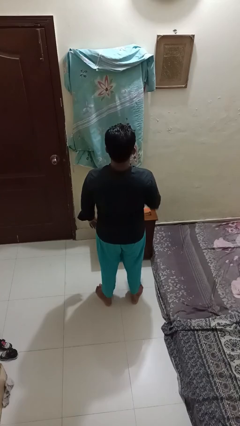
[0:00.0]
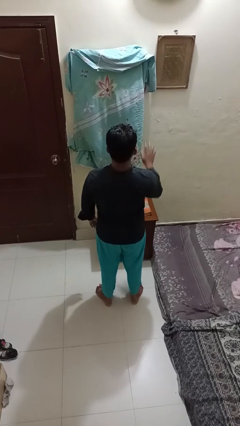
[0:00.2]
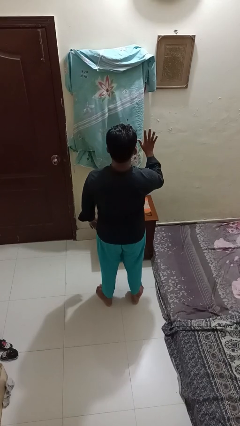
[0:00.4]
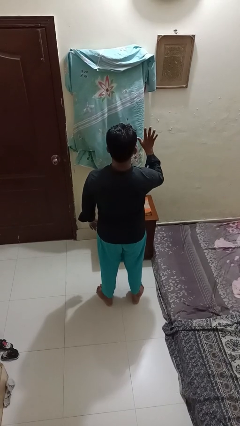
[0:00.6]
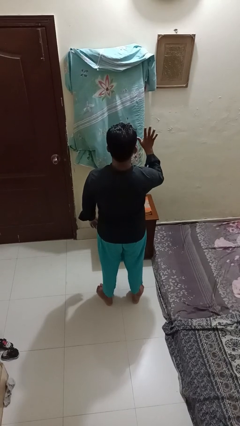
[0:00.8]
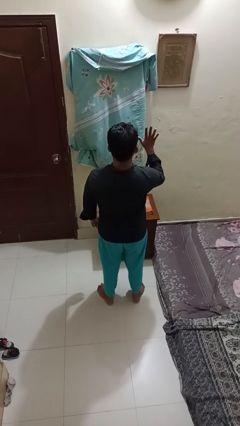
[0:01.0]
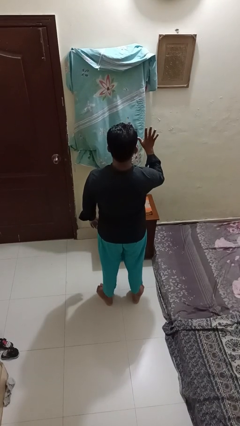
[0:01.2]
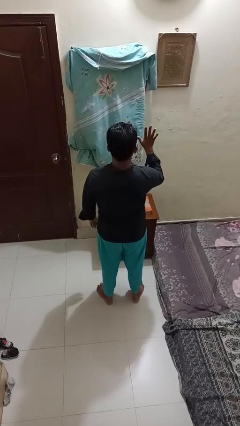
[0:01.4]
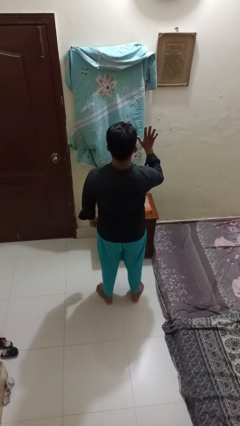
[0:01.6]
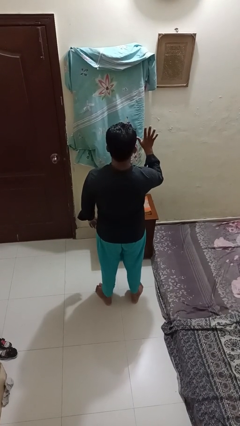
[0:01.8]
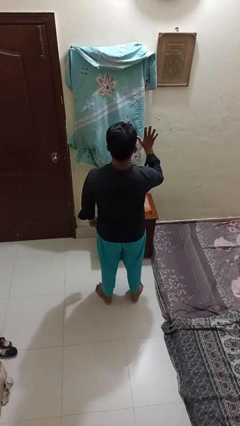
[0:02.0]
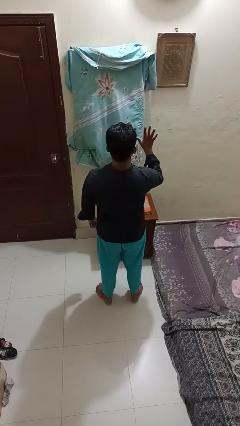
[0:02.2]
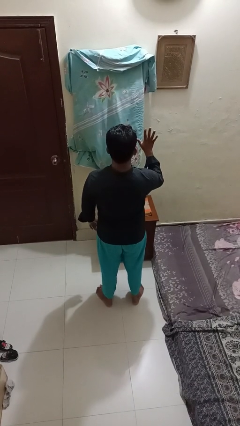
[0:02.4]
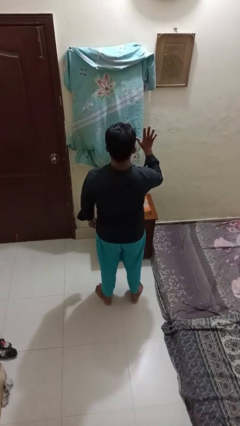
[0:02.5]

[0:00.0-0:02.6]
person gestures number five

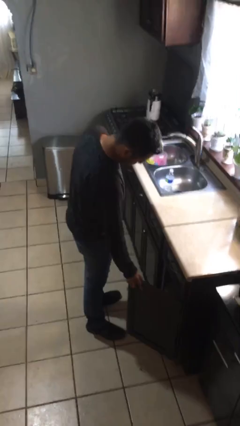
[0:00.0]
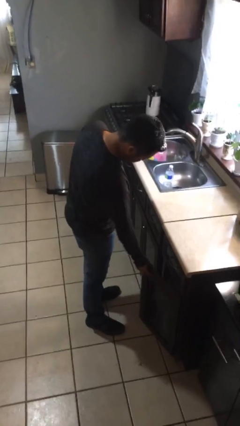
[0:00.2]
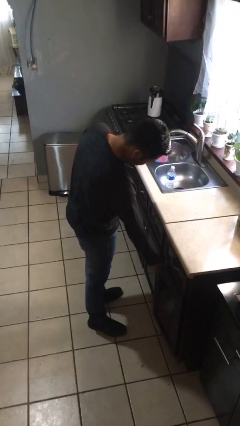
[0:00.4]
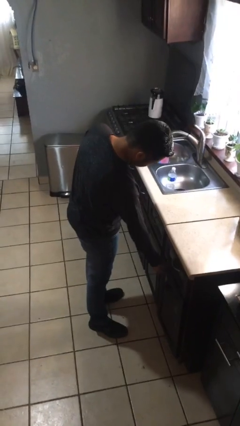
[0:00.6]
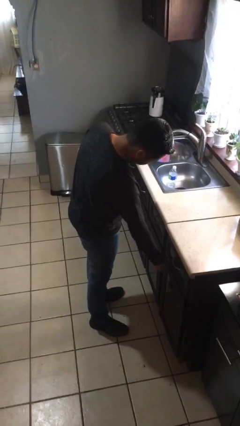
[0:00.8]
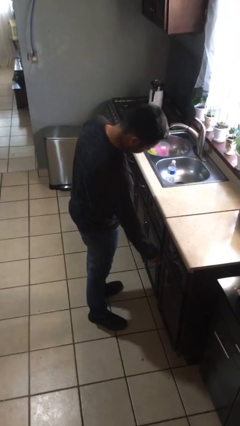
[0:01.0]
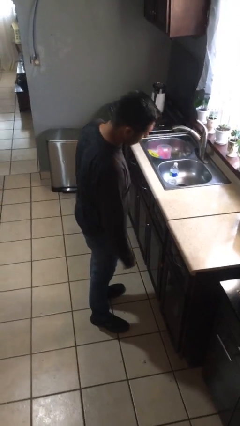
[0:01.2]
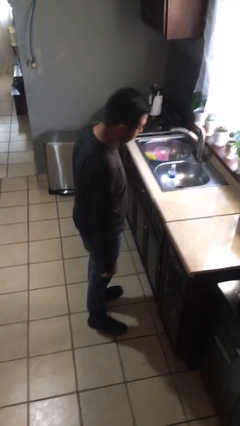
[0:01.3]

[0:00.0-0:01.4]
person closes cabinet

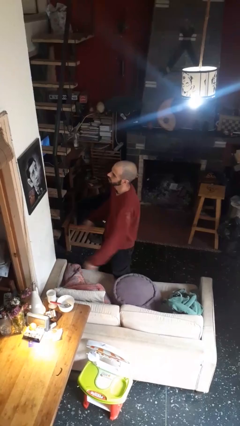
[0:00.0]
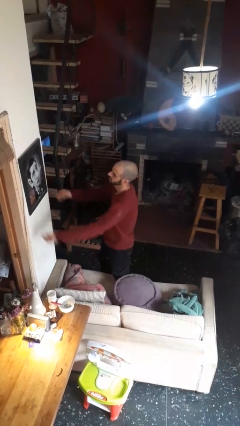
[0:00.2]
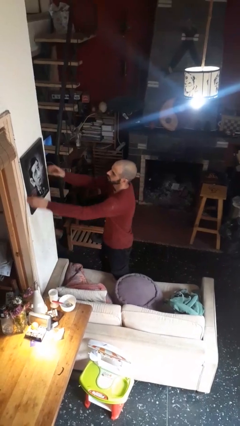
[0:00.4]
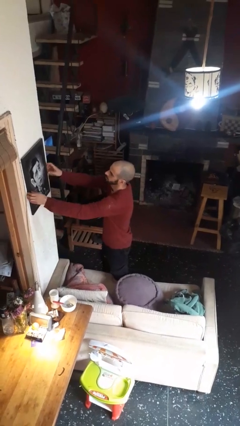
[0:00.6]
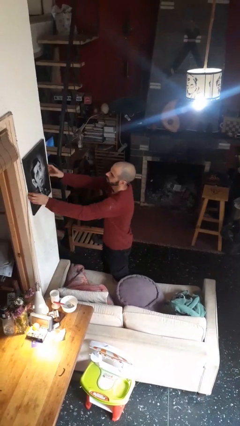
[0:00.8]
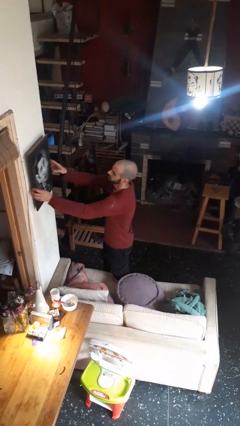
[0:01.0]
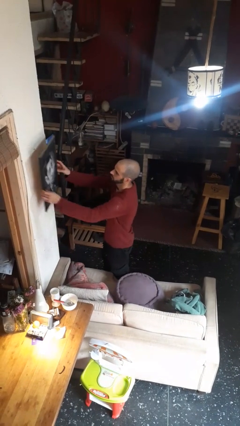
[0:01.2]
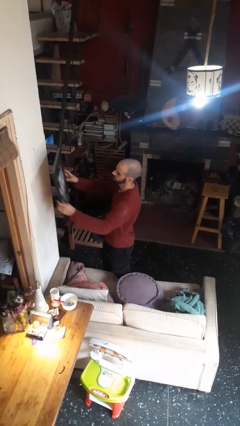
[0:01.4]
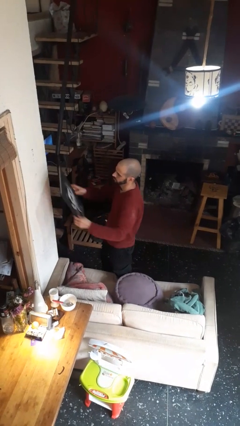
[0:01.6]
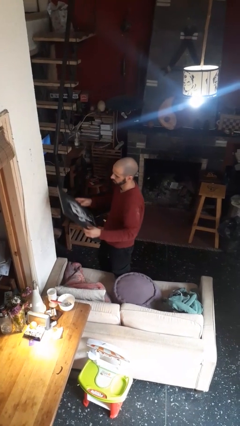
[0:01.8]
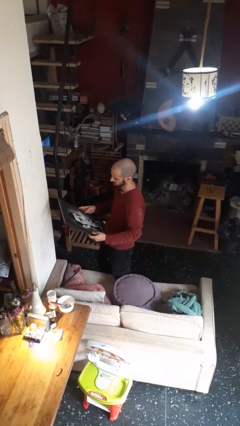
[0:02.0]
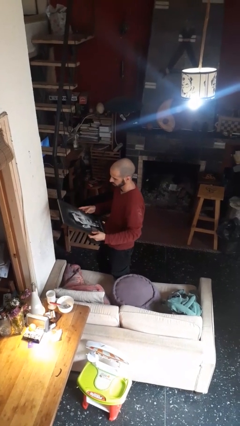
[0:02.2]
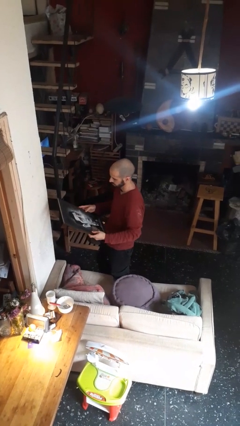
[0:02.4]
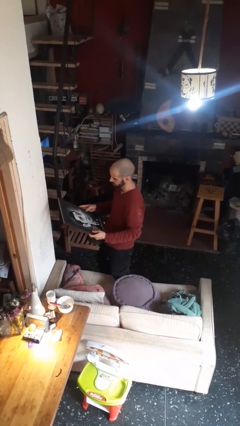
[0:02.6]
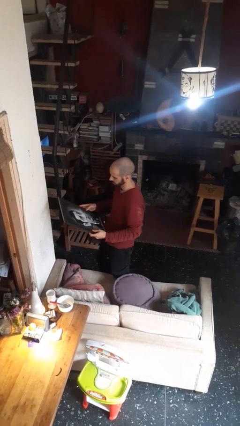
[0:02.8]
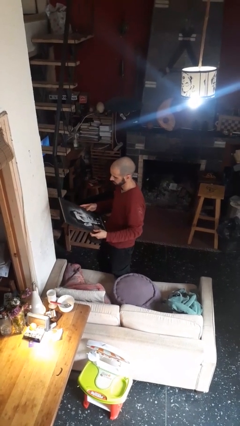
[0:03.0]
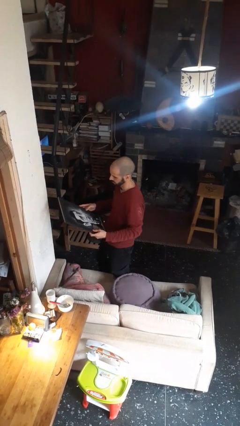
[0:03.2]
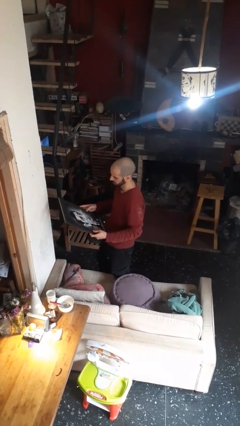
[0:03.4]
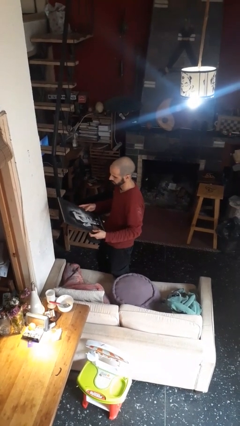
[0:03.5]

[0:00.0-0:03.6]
person takes down picture frame

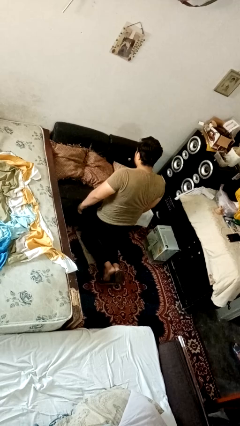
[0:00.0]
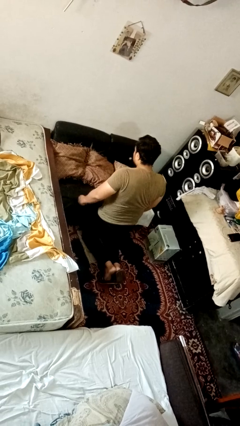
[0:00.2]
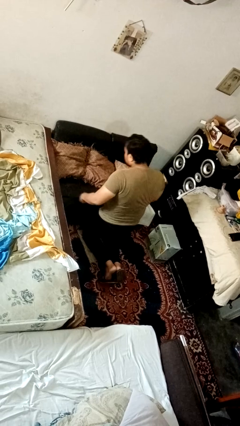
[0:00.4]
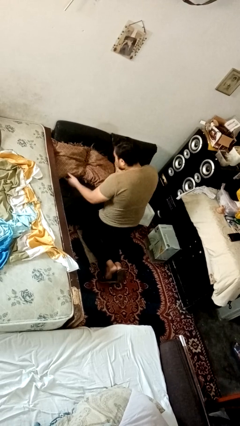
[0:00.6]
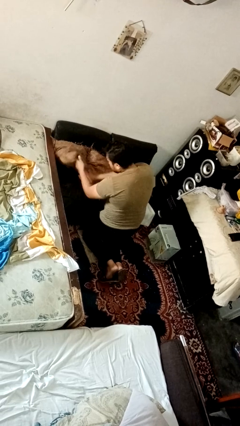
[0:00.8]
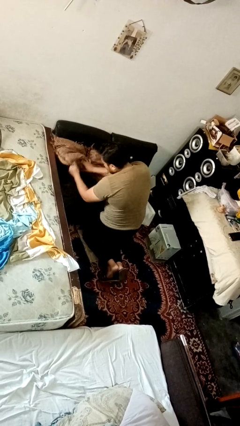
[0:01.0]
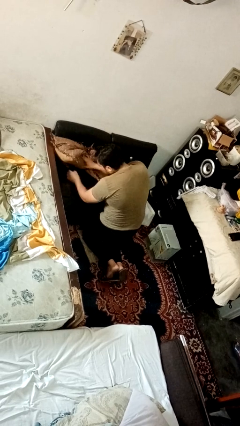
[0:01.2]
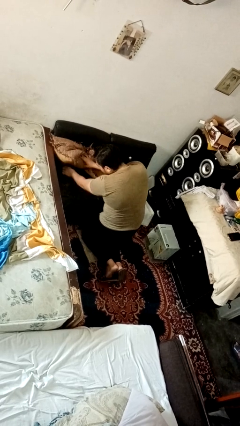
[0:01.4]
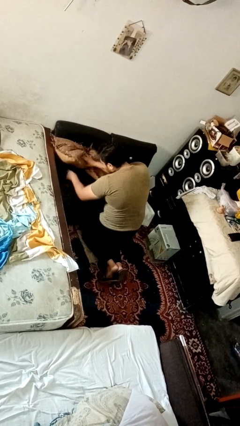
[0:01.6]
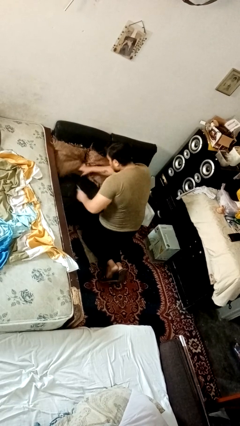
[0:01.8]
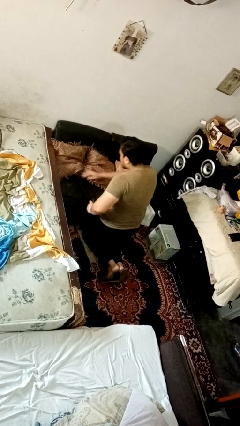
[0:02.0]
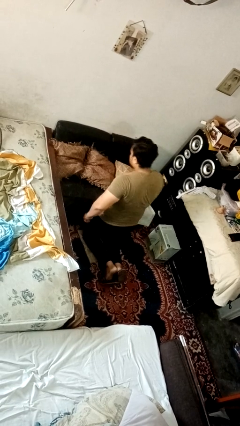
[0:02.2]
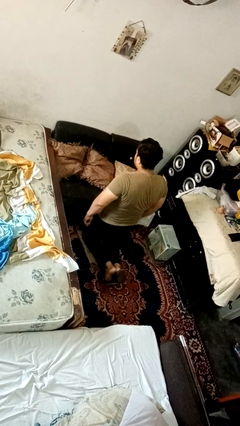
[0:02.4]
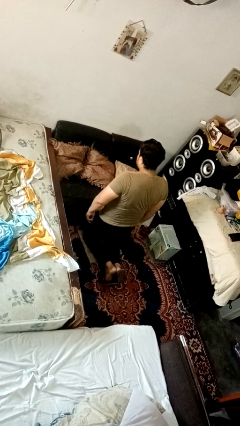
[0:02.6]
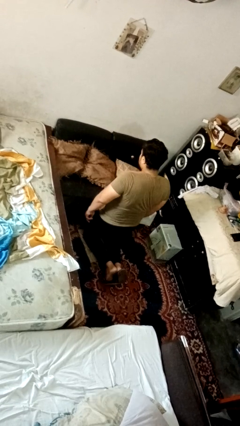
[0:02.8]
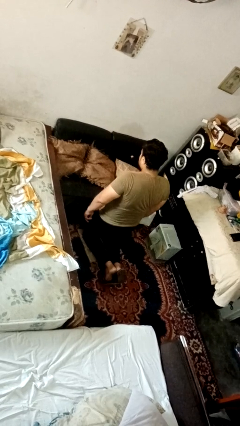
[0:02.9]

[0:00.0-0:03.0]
person searches in couch

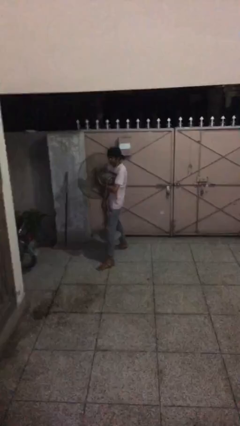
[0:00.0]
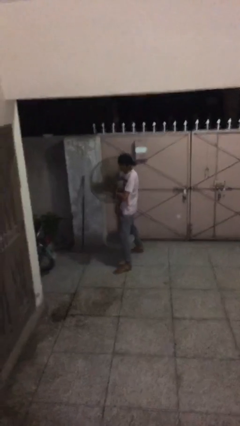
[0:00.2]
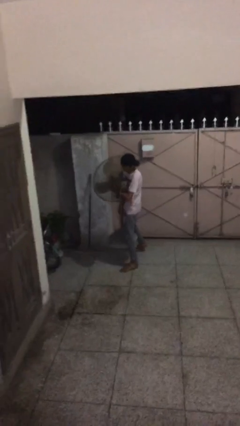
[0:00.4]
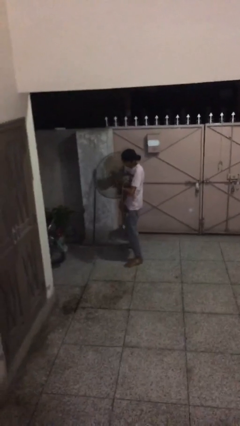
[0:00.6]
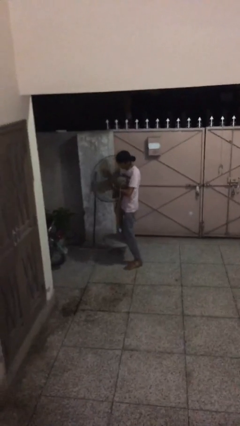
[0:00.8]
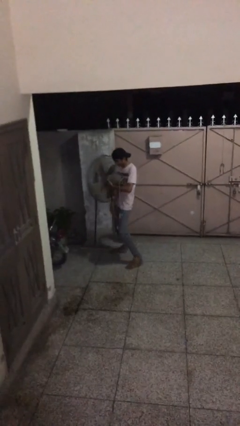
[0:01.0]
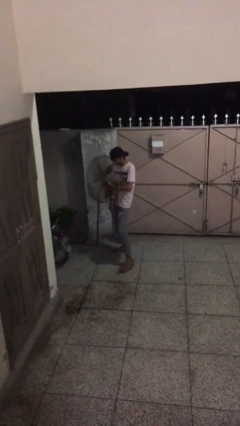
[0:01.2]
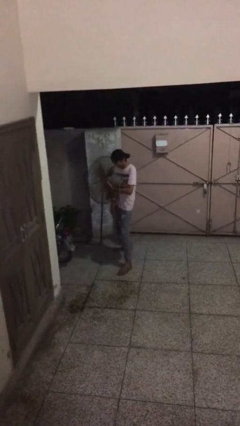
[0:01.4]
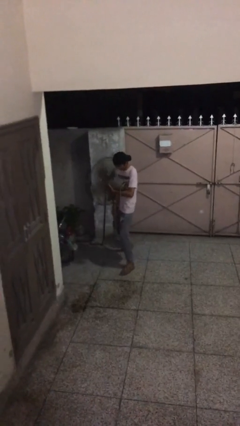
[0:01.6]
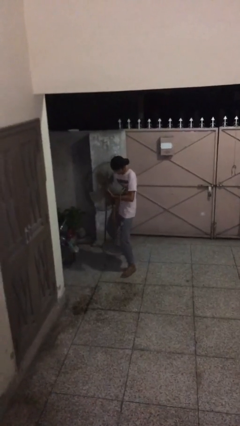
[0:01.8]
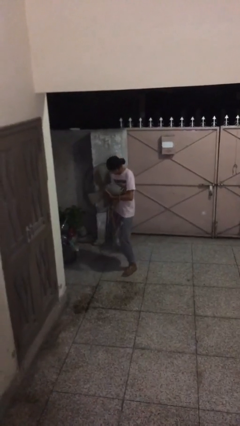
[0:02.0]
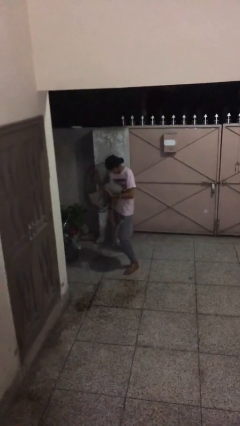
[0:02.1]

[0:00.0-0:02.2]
person carries heavy object

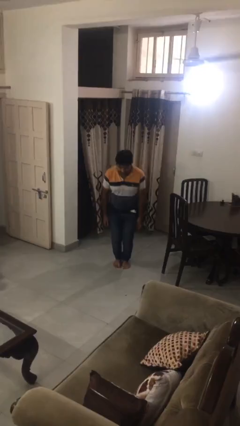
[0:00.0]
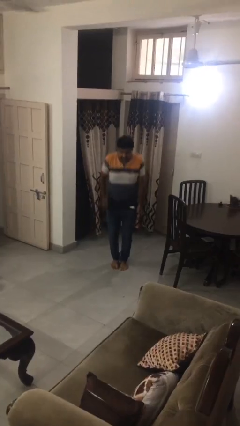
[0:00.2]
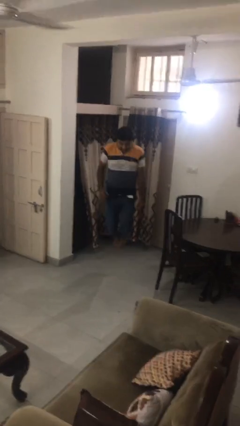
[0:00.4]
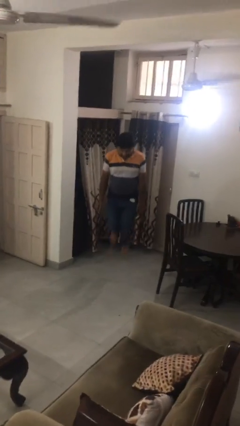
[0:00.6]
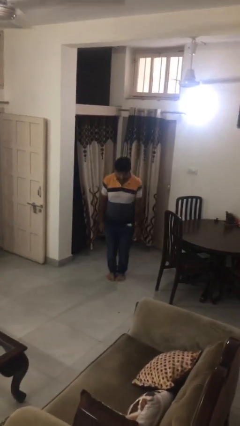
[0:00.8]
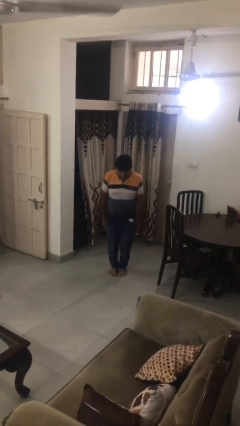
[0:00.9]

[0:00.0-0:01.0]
person jumps

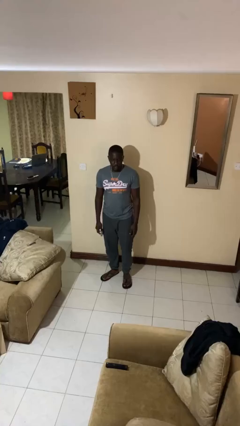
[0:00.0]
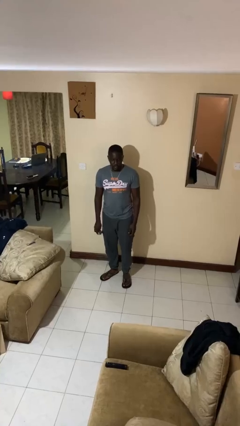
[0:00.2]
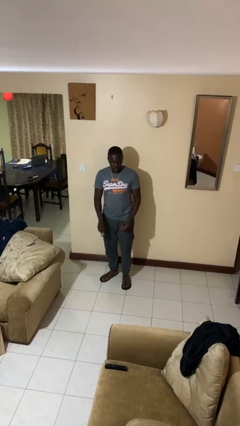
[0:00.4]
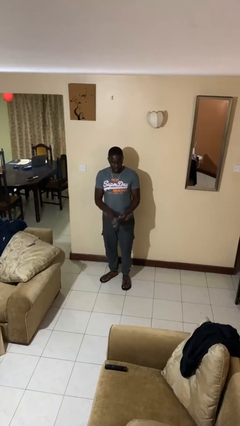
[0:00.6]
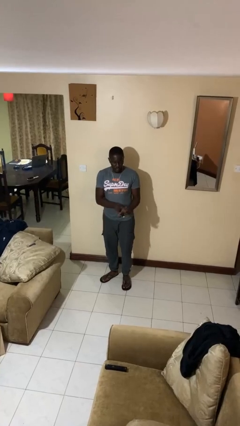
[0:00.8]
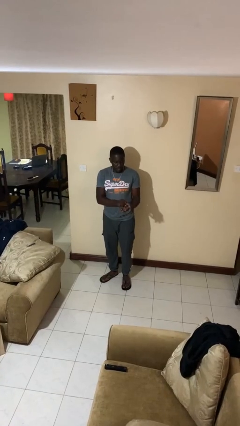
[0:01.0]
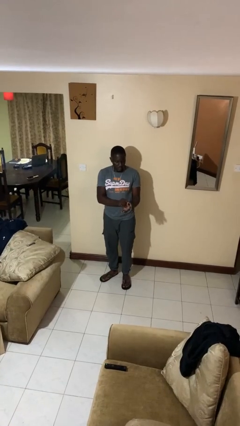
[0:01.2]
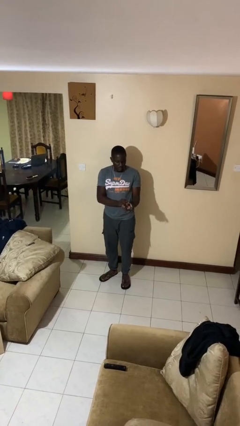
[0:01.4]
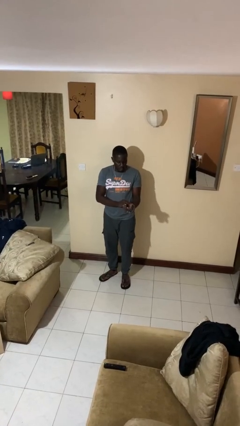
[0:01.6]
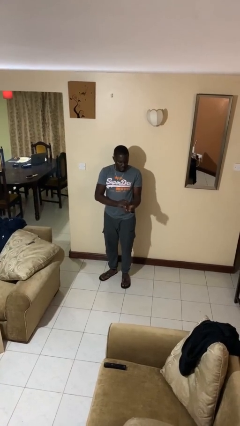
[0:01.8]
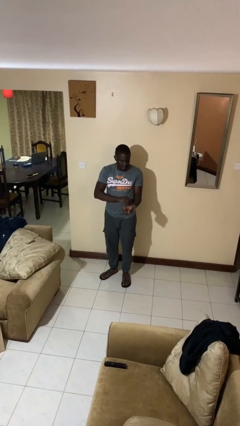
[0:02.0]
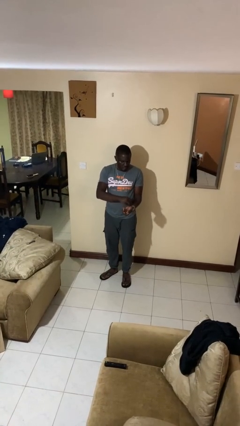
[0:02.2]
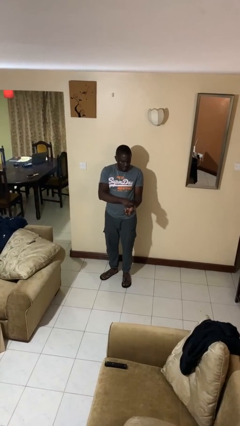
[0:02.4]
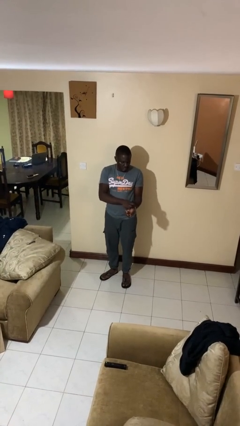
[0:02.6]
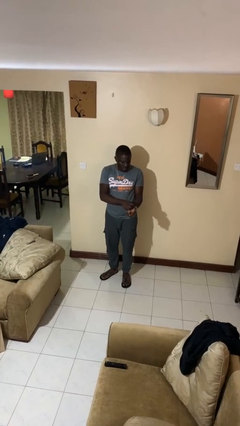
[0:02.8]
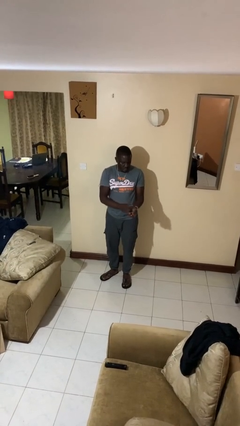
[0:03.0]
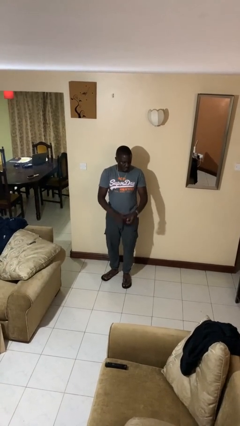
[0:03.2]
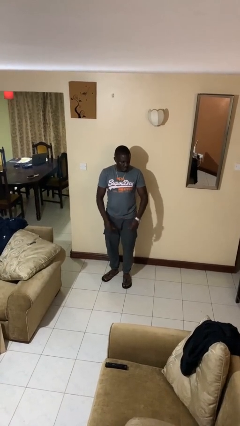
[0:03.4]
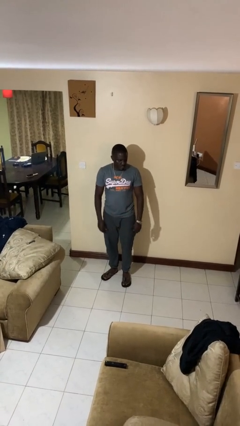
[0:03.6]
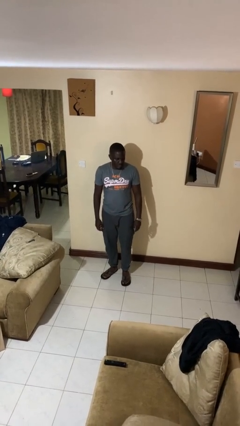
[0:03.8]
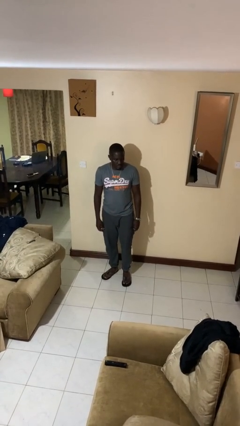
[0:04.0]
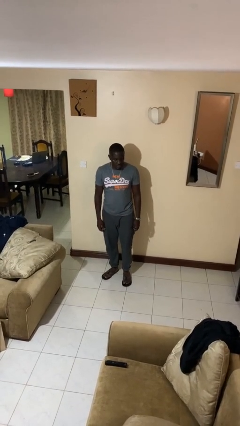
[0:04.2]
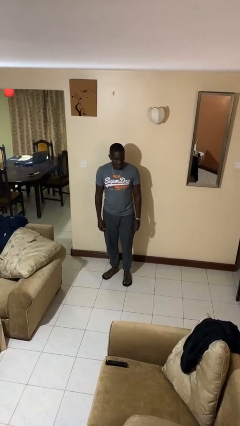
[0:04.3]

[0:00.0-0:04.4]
person puts on wristwatch
